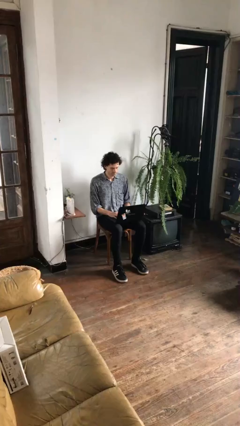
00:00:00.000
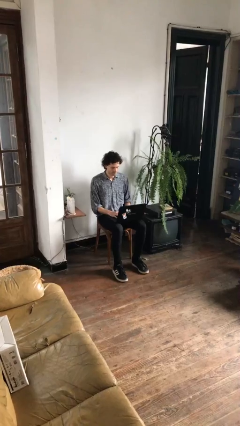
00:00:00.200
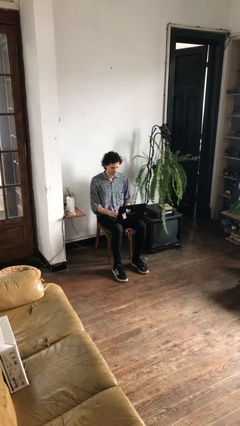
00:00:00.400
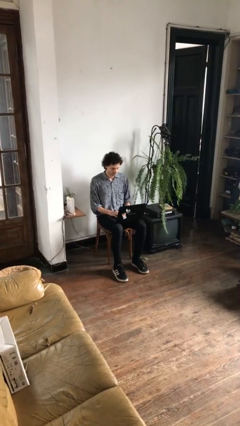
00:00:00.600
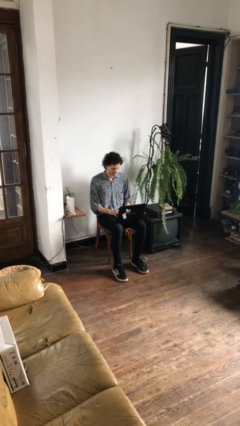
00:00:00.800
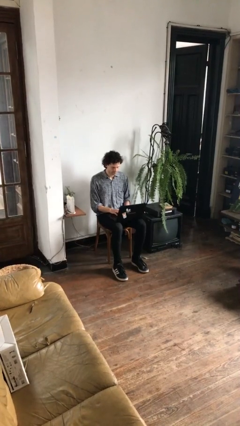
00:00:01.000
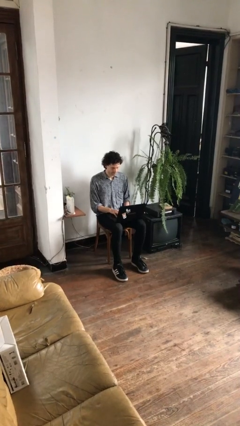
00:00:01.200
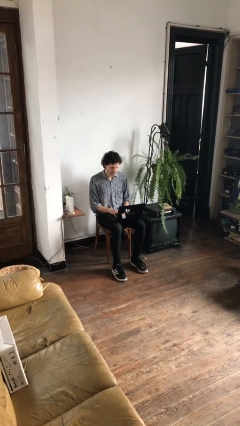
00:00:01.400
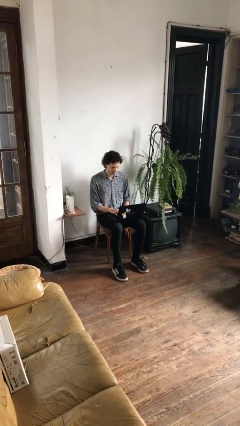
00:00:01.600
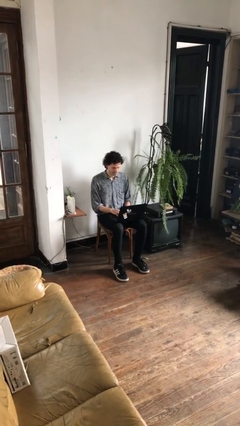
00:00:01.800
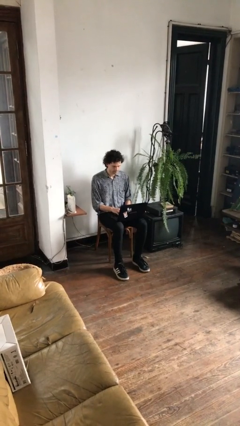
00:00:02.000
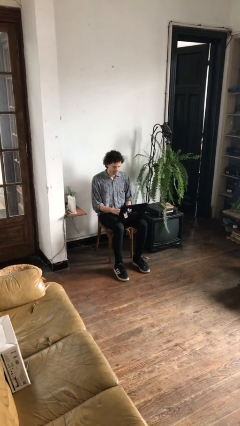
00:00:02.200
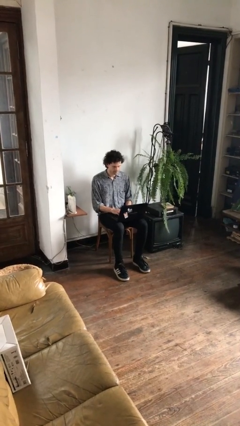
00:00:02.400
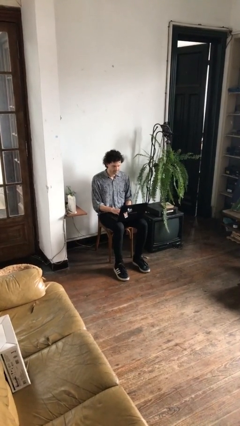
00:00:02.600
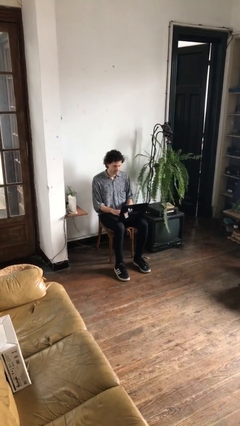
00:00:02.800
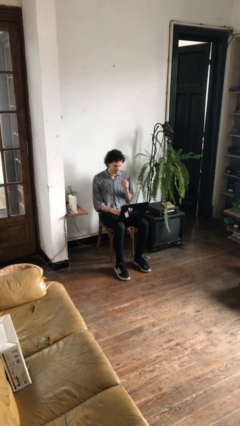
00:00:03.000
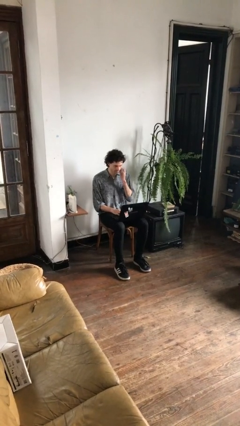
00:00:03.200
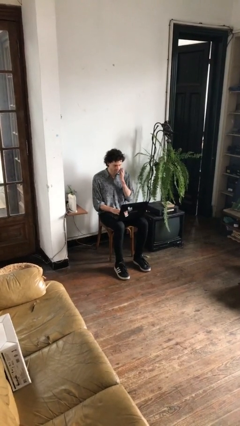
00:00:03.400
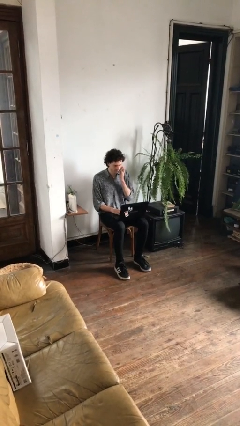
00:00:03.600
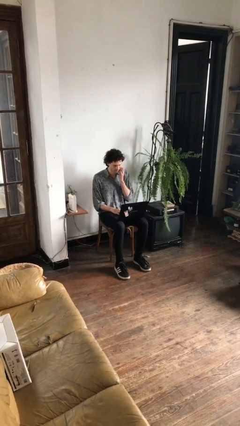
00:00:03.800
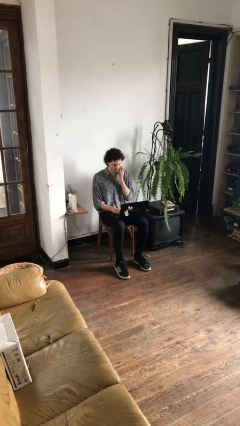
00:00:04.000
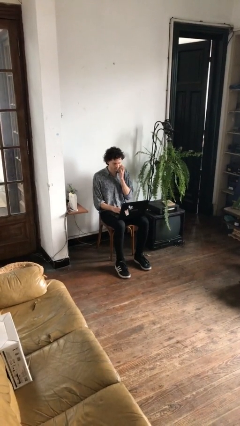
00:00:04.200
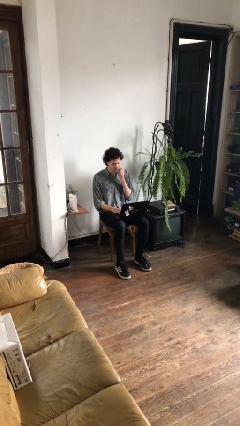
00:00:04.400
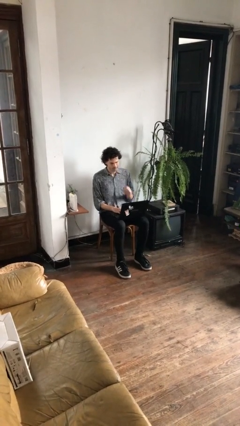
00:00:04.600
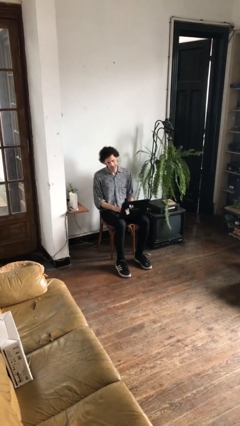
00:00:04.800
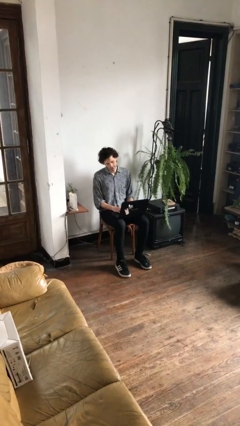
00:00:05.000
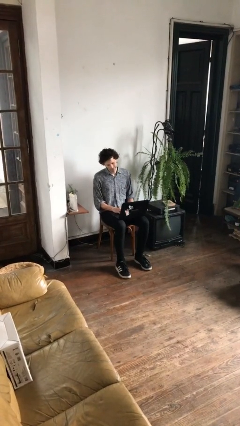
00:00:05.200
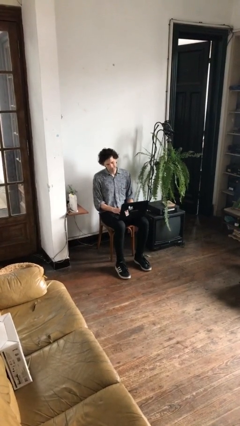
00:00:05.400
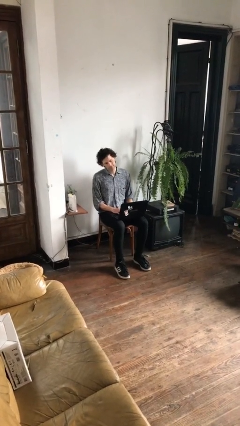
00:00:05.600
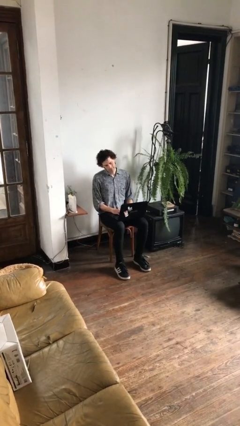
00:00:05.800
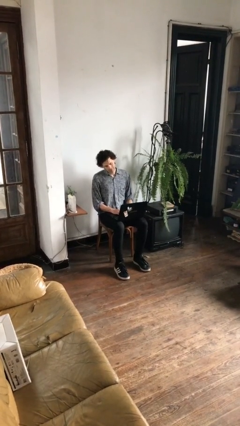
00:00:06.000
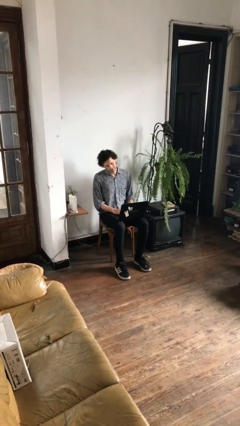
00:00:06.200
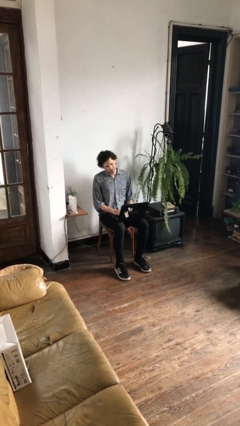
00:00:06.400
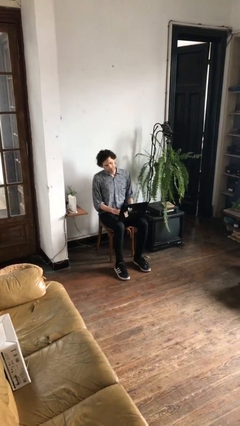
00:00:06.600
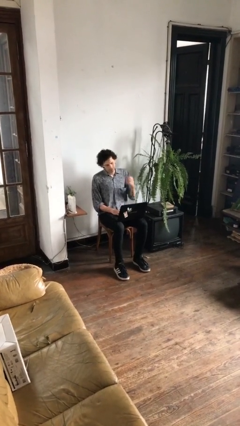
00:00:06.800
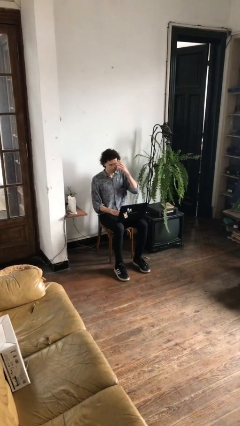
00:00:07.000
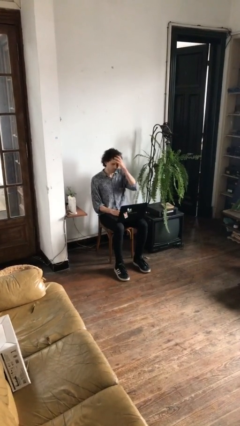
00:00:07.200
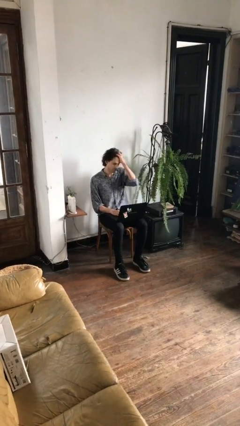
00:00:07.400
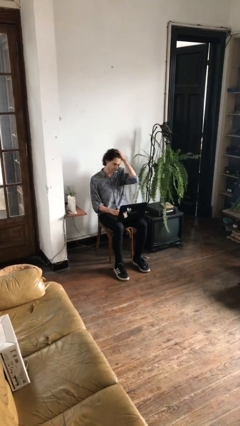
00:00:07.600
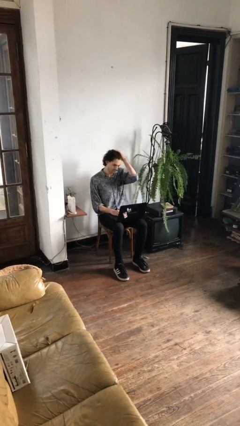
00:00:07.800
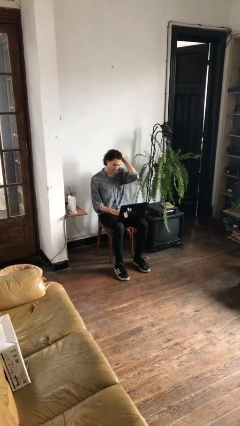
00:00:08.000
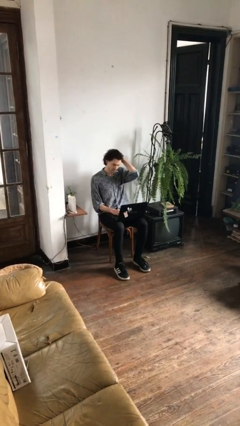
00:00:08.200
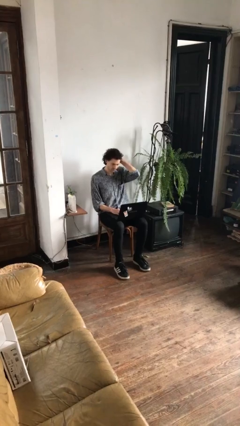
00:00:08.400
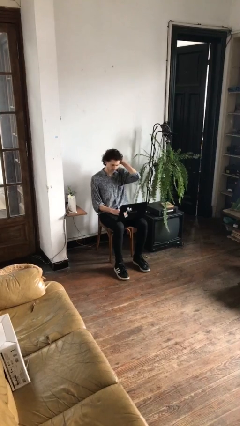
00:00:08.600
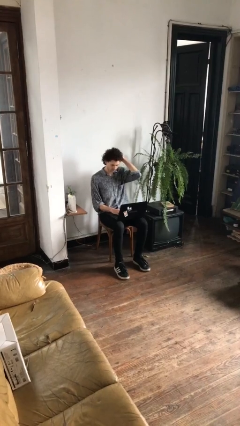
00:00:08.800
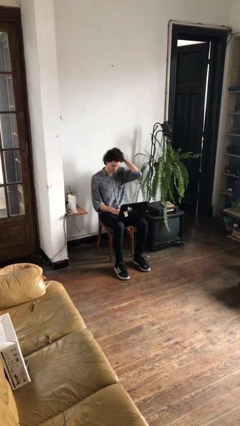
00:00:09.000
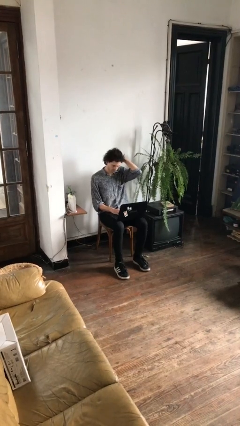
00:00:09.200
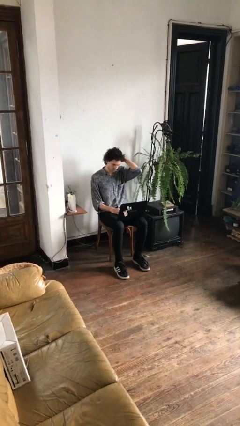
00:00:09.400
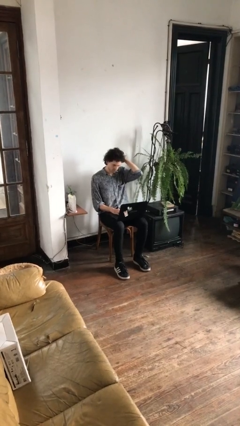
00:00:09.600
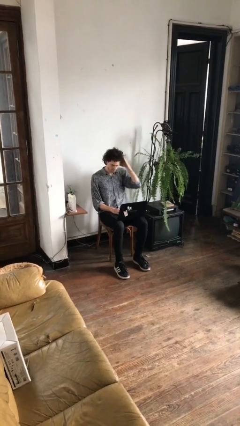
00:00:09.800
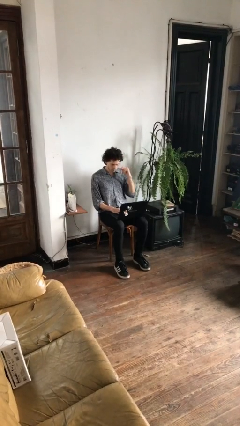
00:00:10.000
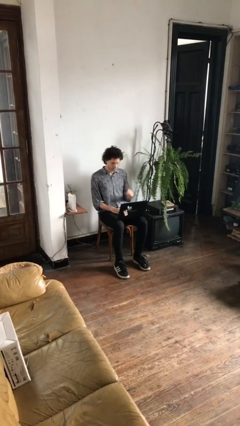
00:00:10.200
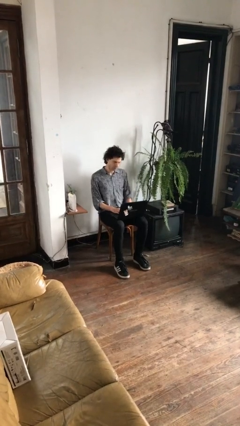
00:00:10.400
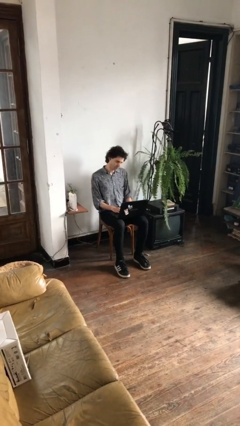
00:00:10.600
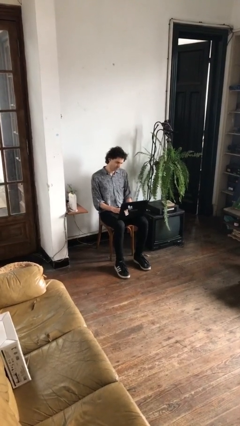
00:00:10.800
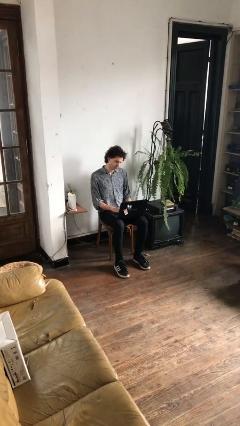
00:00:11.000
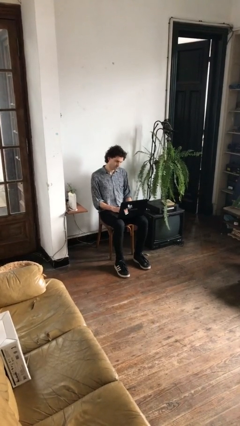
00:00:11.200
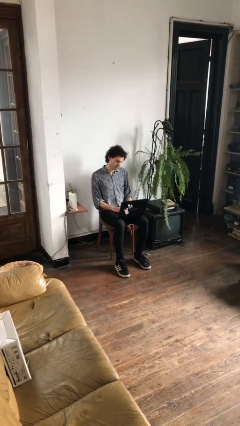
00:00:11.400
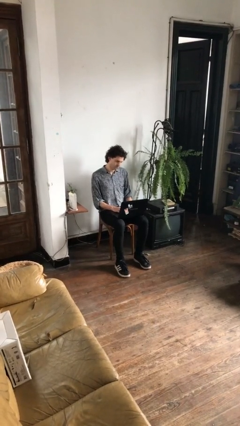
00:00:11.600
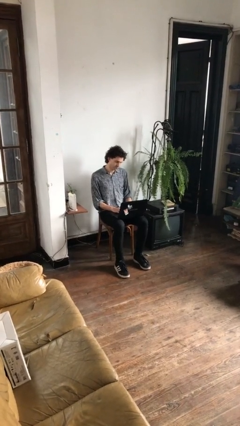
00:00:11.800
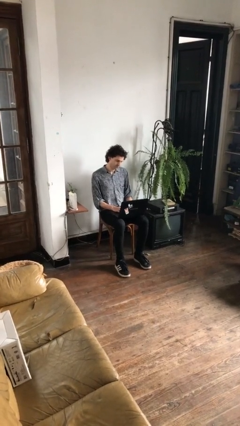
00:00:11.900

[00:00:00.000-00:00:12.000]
person interacts with laptop

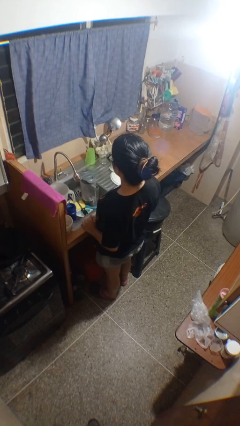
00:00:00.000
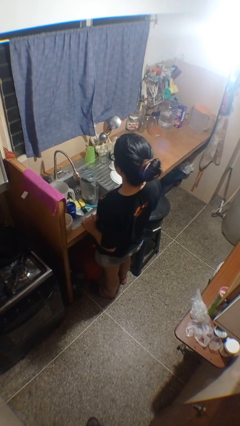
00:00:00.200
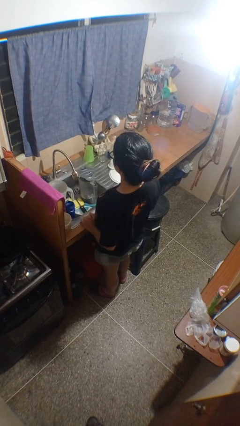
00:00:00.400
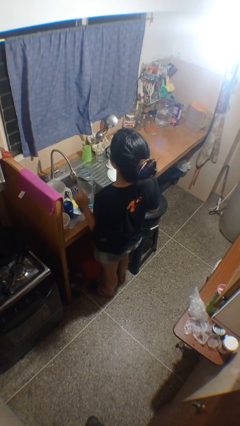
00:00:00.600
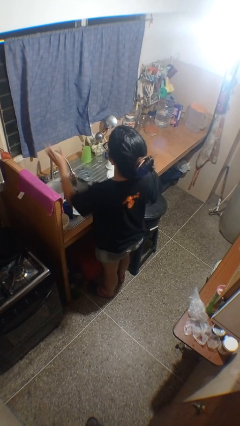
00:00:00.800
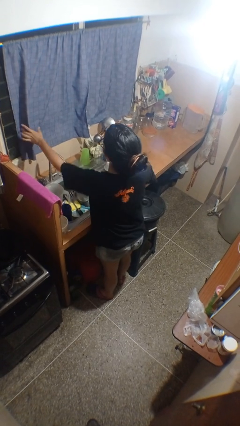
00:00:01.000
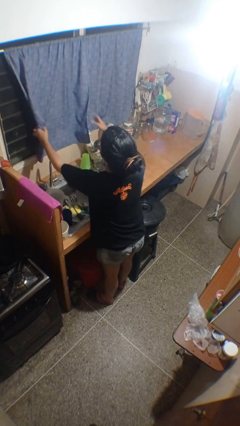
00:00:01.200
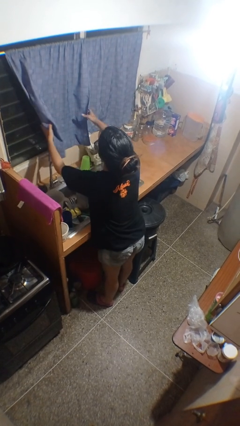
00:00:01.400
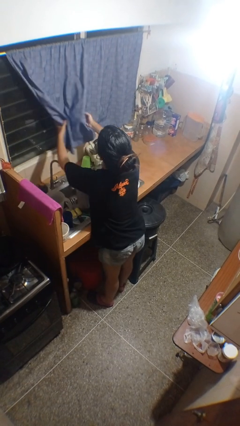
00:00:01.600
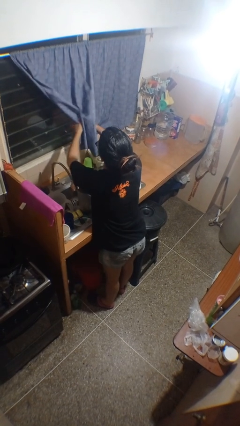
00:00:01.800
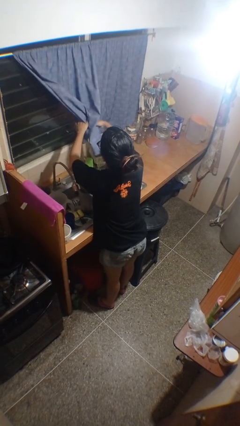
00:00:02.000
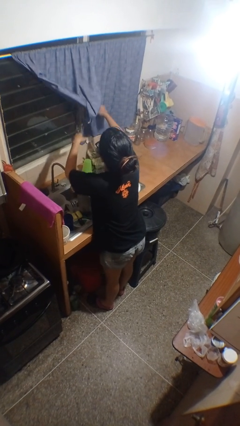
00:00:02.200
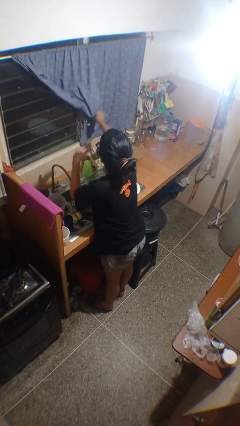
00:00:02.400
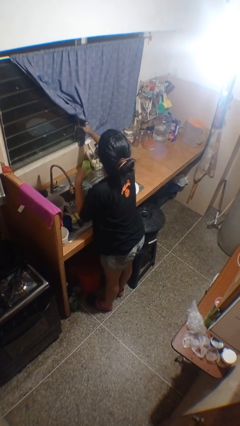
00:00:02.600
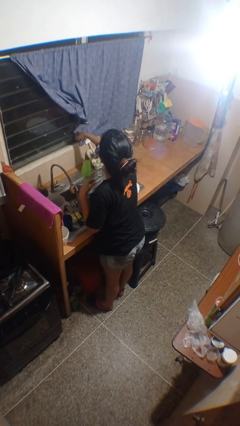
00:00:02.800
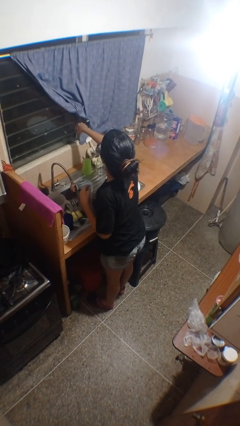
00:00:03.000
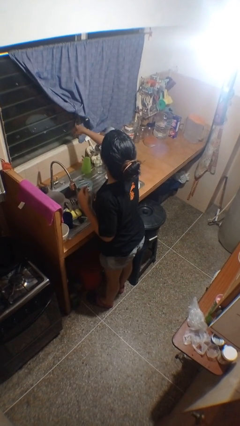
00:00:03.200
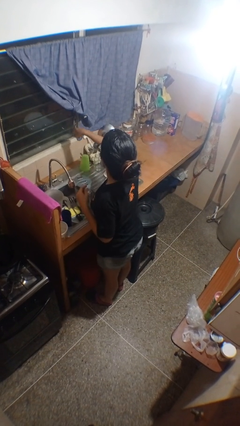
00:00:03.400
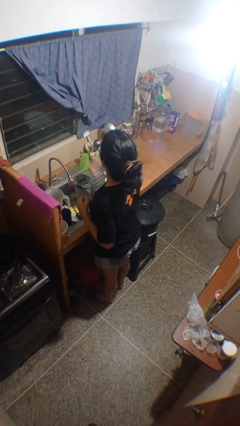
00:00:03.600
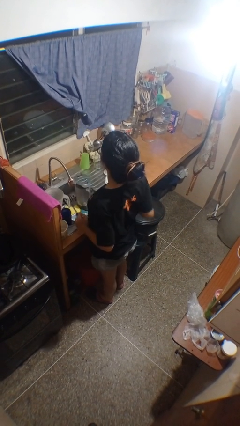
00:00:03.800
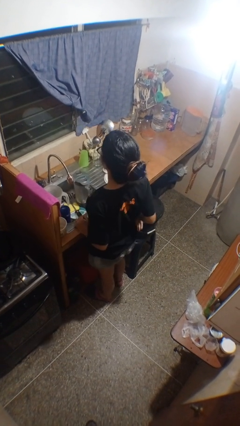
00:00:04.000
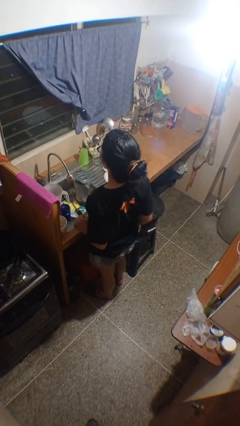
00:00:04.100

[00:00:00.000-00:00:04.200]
person opens curtains

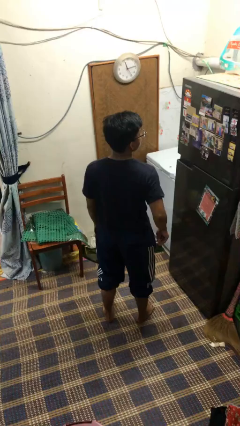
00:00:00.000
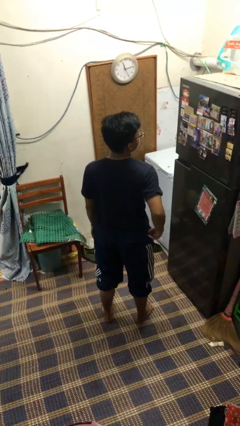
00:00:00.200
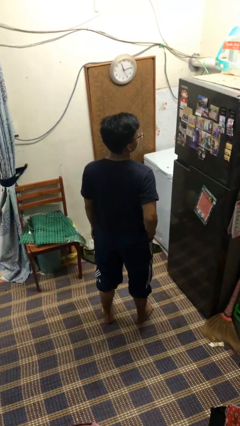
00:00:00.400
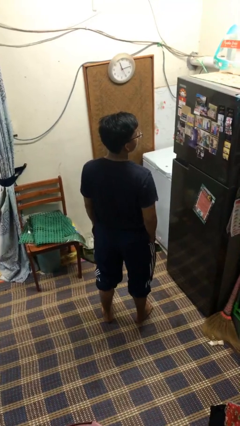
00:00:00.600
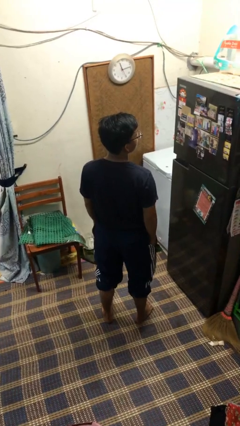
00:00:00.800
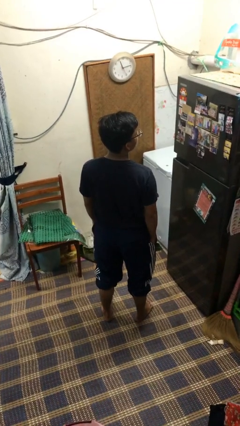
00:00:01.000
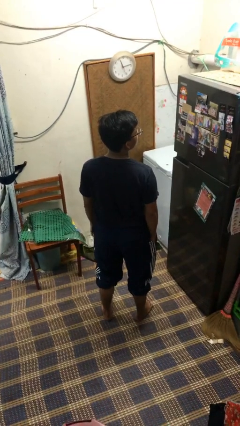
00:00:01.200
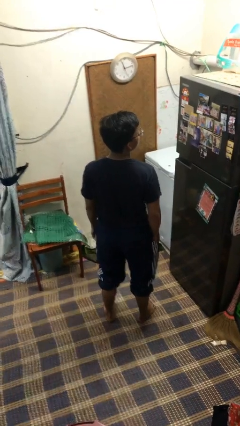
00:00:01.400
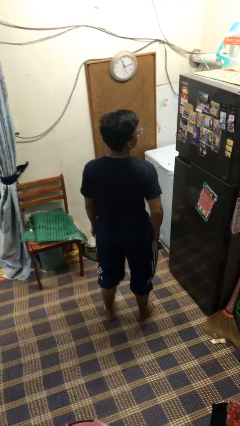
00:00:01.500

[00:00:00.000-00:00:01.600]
person puts hands in back pockets
